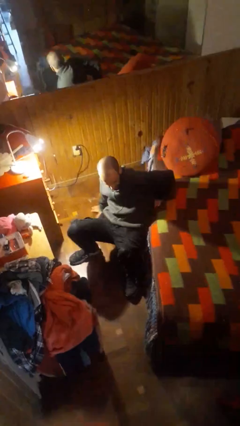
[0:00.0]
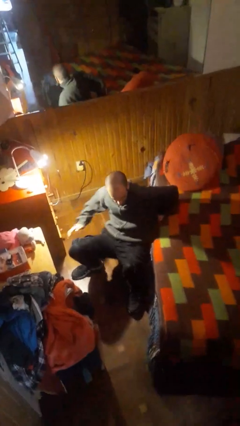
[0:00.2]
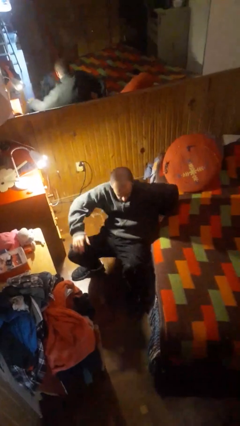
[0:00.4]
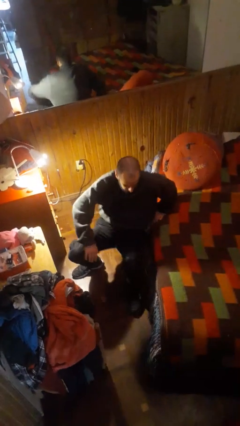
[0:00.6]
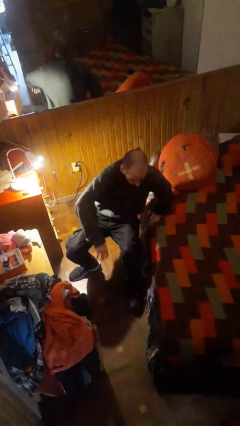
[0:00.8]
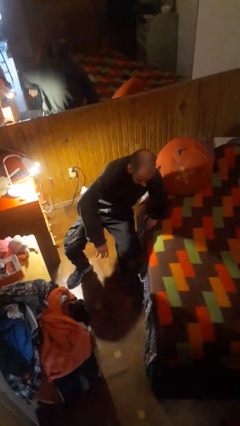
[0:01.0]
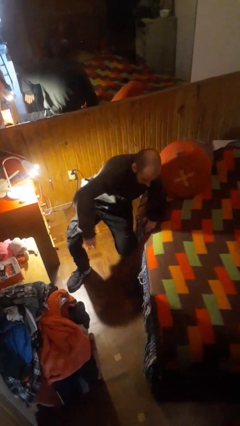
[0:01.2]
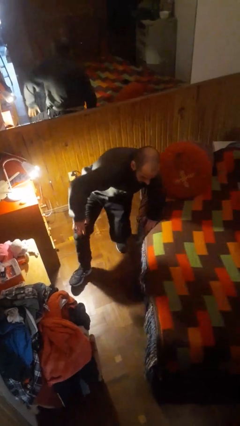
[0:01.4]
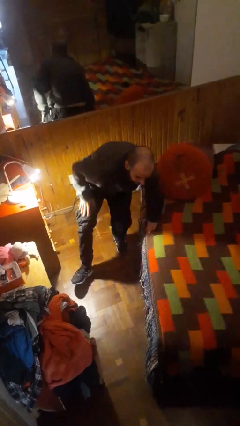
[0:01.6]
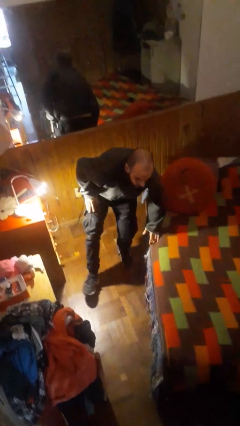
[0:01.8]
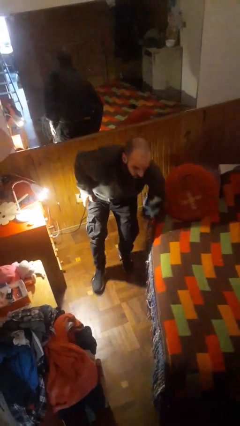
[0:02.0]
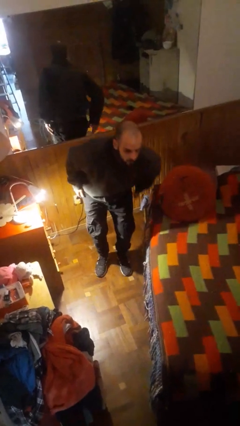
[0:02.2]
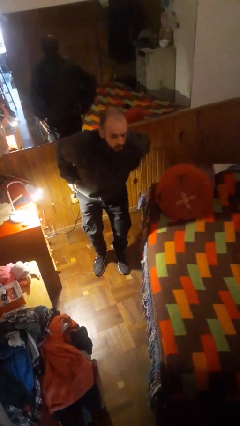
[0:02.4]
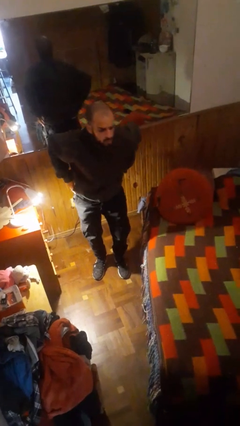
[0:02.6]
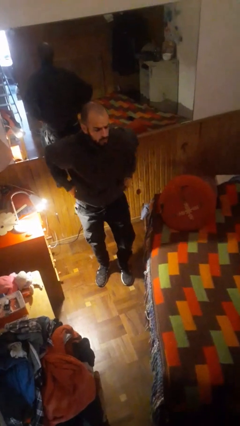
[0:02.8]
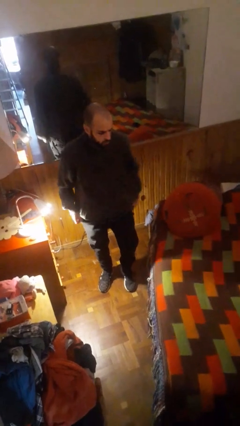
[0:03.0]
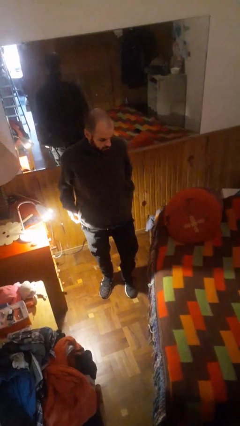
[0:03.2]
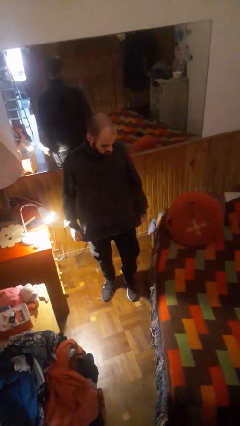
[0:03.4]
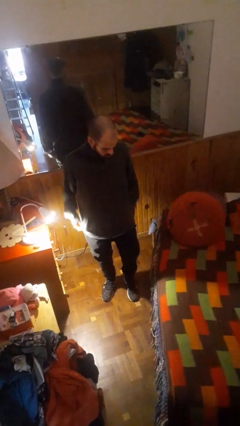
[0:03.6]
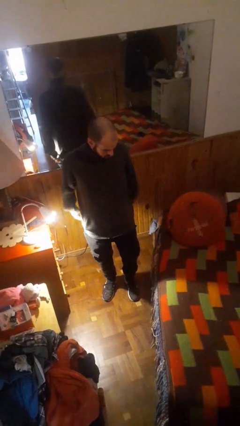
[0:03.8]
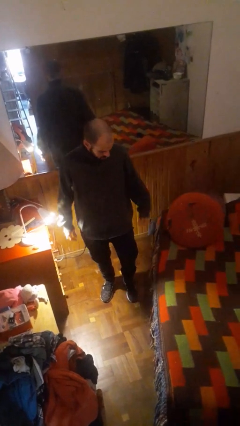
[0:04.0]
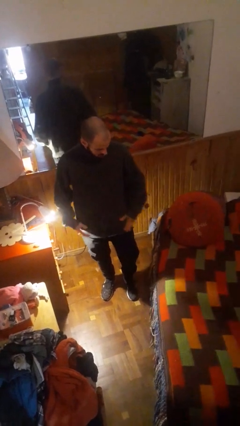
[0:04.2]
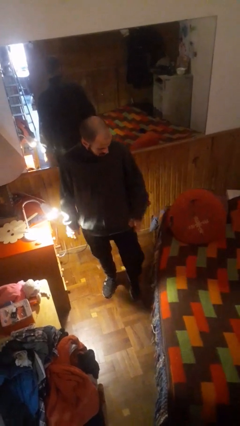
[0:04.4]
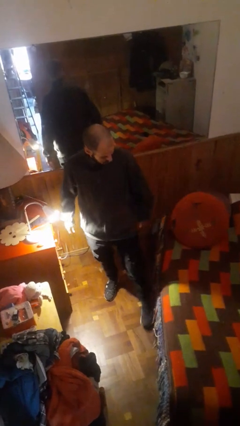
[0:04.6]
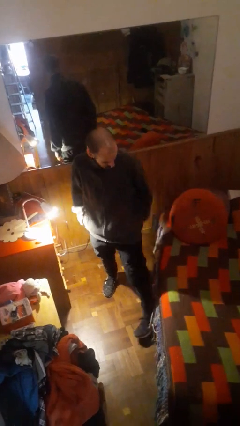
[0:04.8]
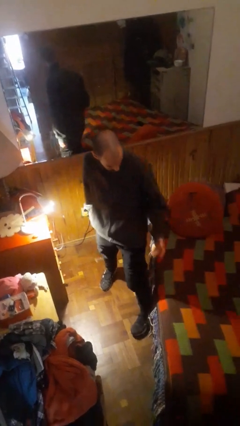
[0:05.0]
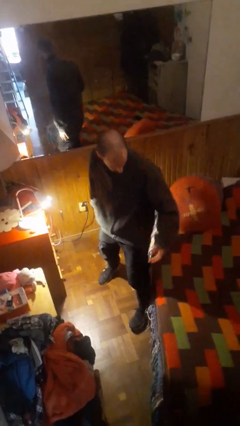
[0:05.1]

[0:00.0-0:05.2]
person stands up from floor

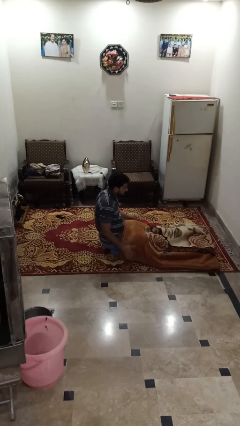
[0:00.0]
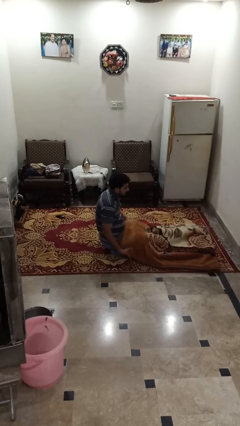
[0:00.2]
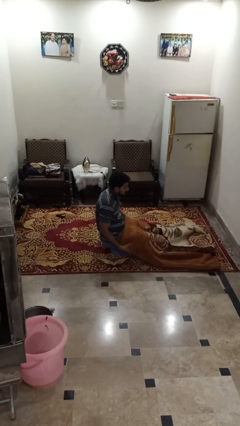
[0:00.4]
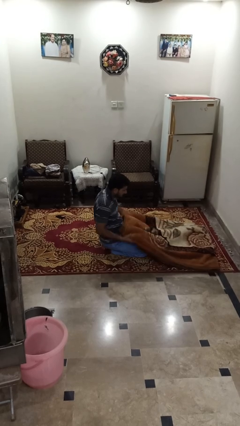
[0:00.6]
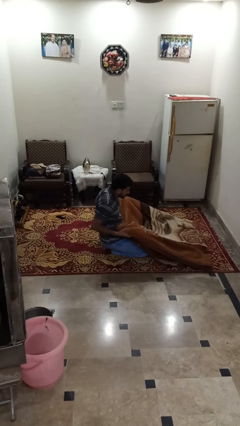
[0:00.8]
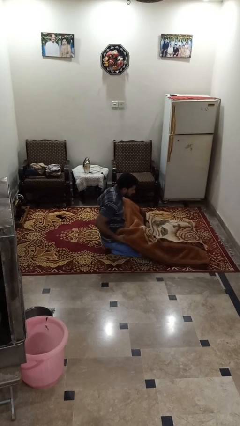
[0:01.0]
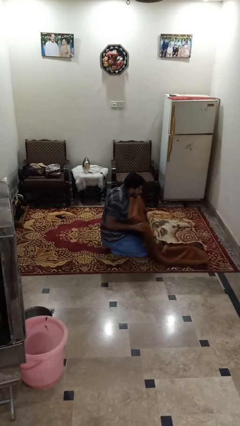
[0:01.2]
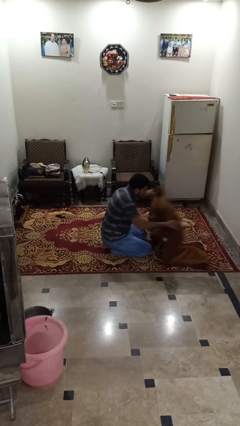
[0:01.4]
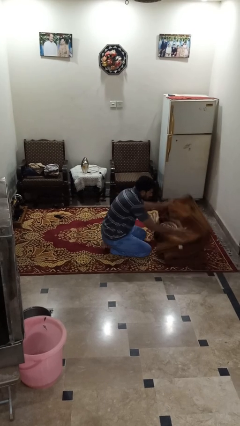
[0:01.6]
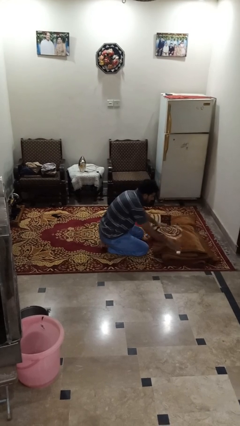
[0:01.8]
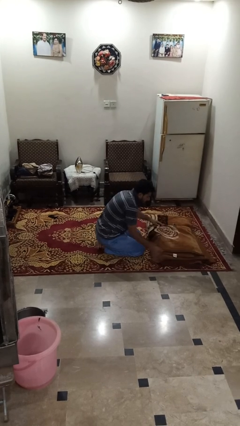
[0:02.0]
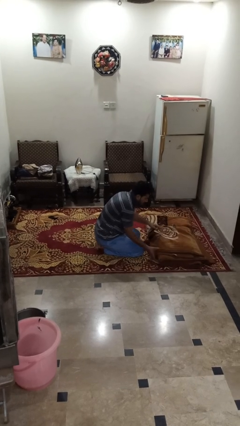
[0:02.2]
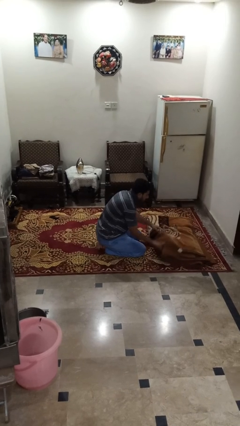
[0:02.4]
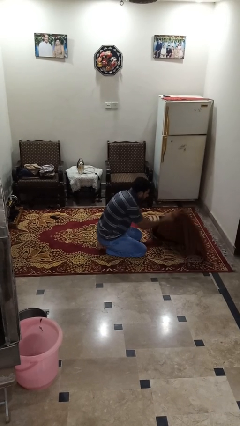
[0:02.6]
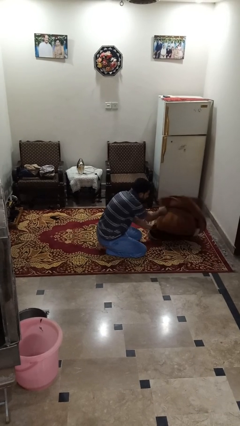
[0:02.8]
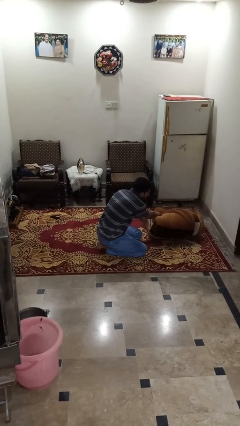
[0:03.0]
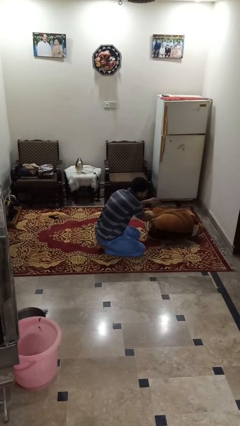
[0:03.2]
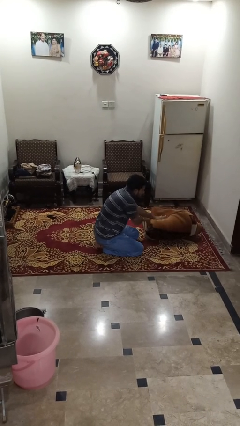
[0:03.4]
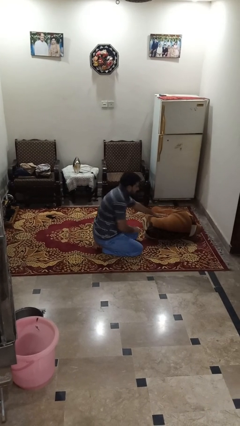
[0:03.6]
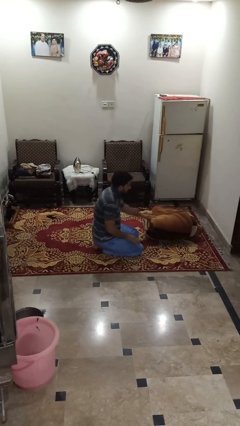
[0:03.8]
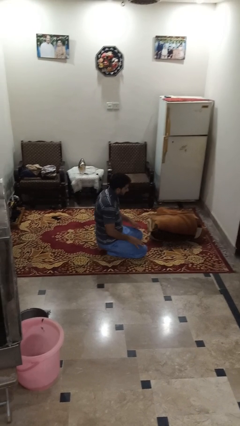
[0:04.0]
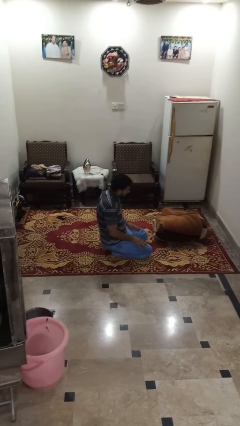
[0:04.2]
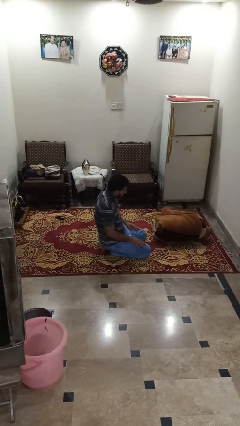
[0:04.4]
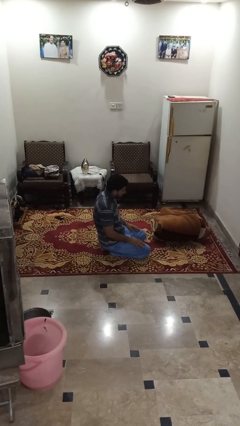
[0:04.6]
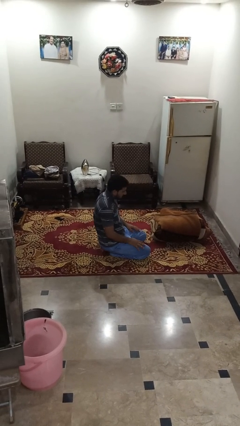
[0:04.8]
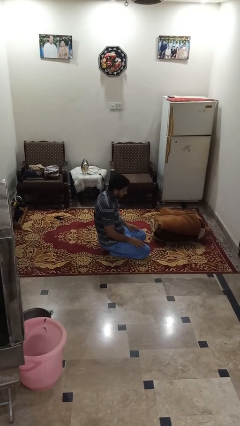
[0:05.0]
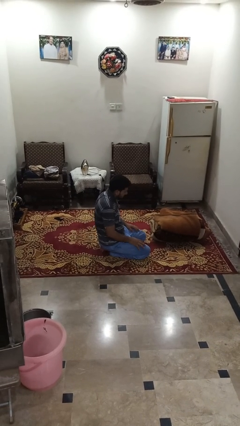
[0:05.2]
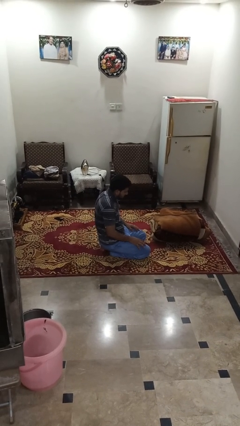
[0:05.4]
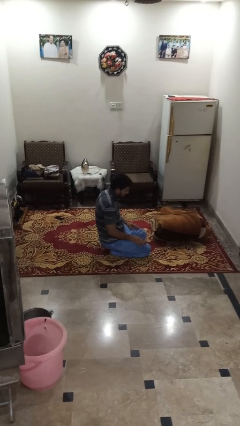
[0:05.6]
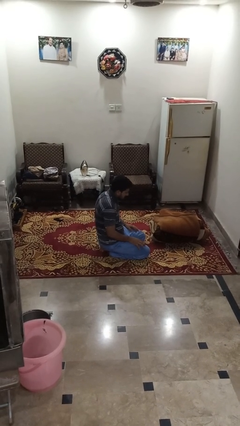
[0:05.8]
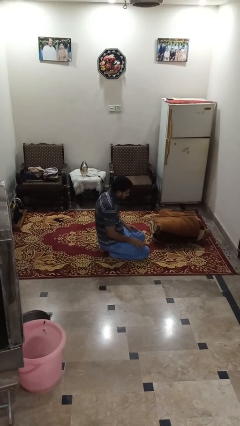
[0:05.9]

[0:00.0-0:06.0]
person folds blanket

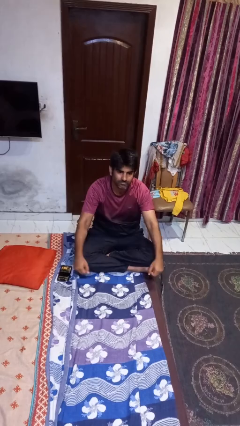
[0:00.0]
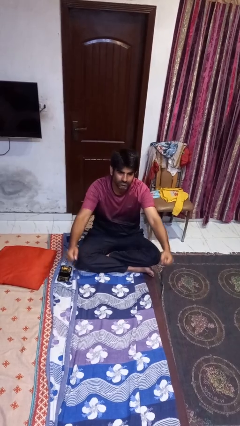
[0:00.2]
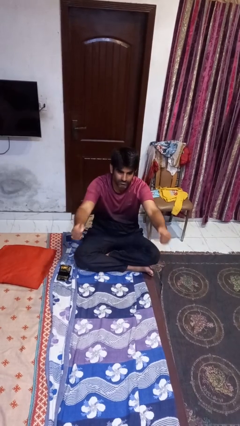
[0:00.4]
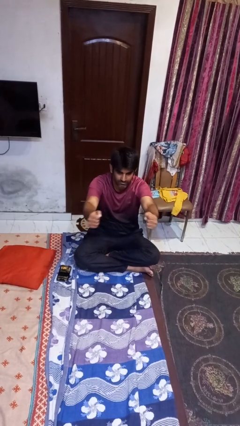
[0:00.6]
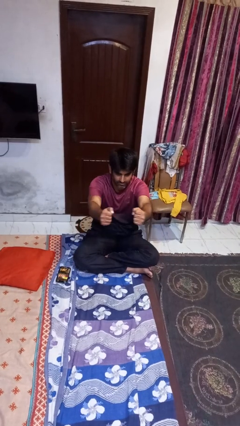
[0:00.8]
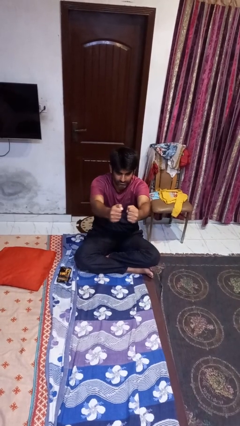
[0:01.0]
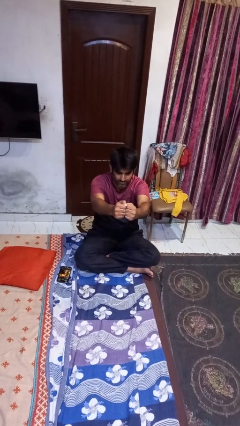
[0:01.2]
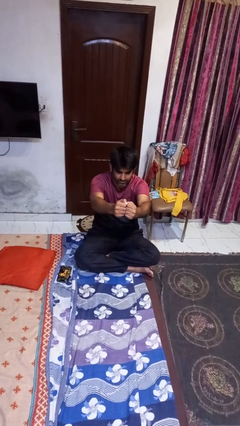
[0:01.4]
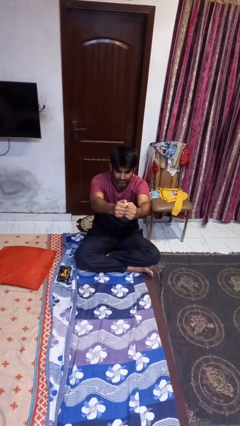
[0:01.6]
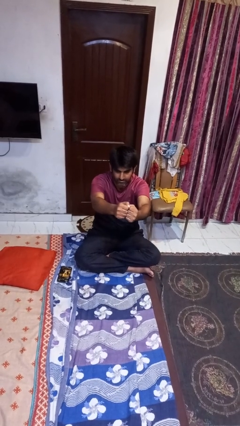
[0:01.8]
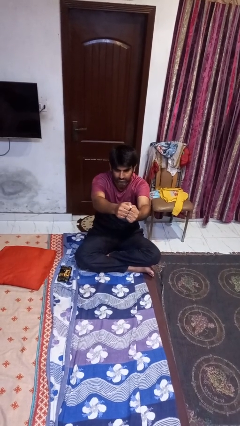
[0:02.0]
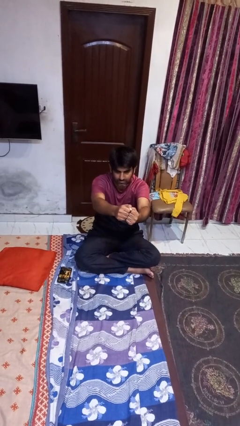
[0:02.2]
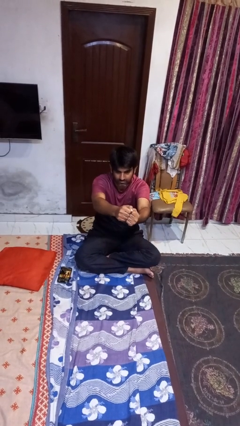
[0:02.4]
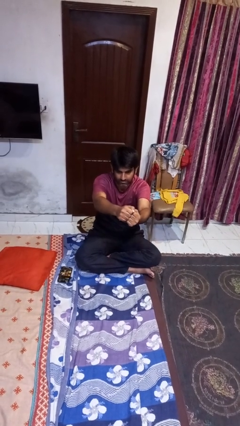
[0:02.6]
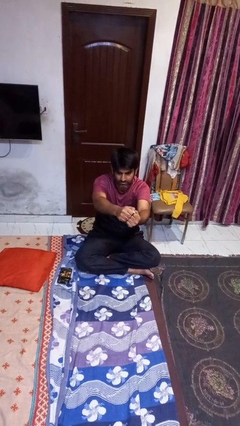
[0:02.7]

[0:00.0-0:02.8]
person gestures zoom in

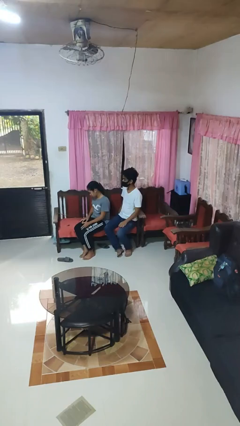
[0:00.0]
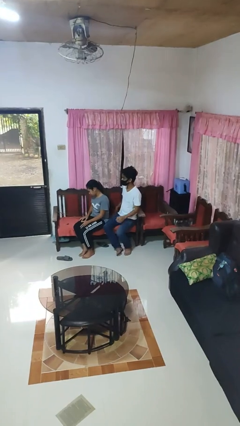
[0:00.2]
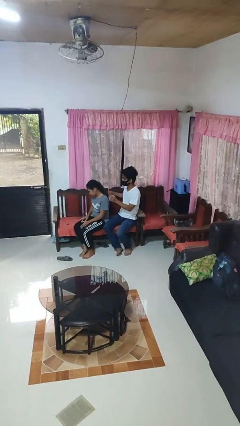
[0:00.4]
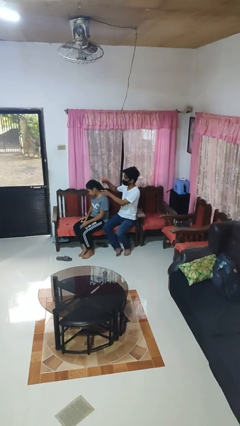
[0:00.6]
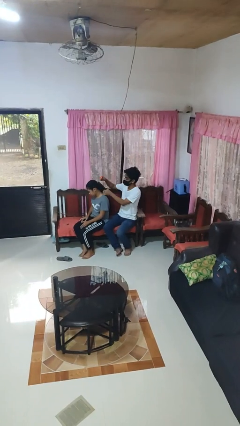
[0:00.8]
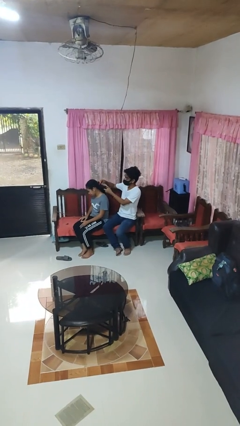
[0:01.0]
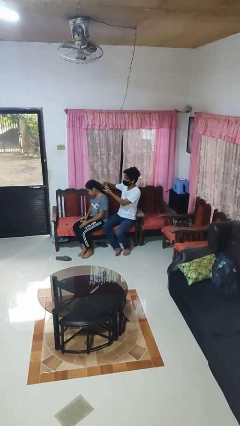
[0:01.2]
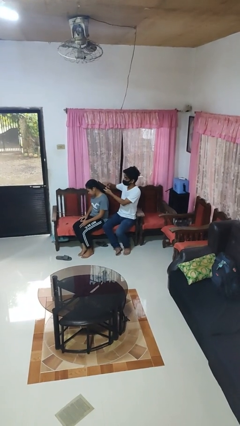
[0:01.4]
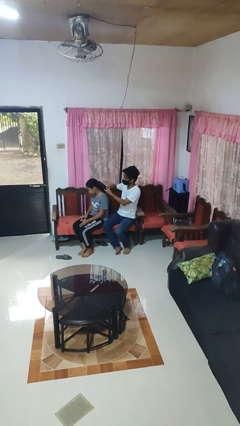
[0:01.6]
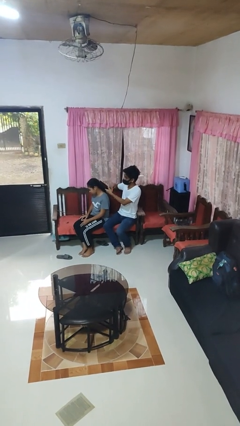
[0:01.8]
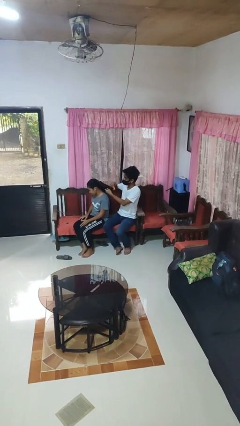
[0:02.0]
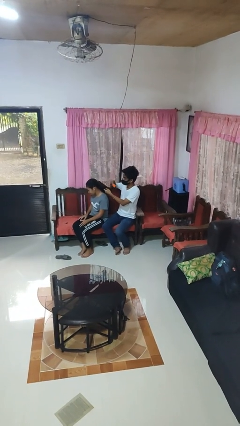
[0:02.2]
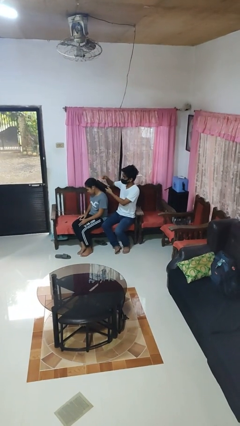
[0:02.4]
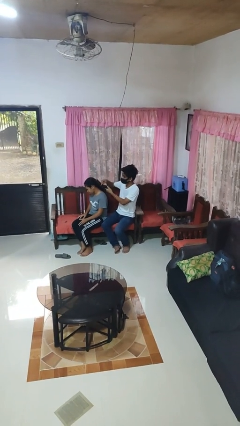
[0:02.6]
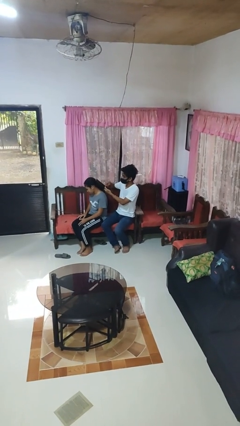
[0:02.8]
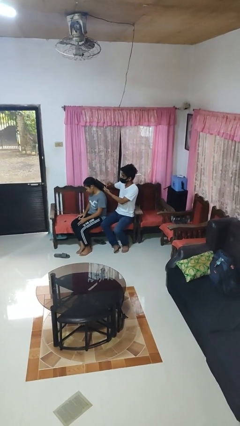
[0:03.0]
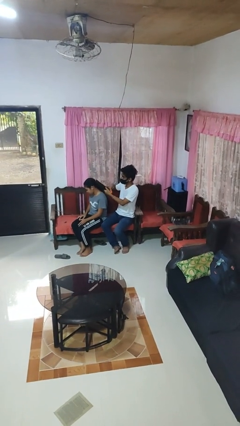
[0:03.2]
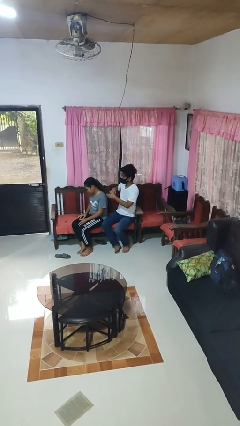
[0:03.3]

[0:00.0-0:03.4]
person brushes hair of person
